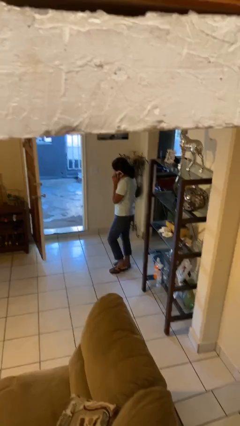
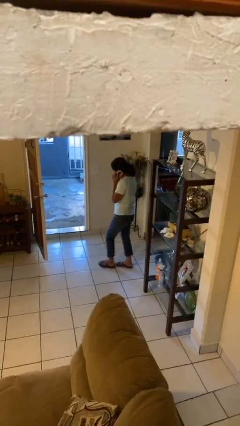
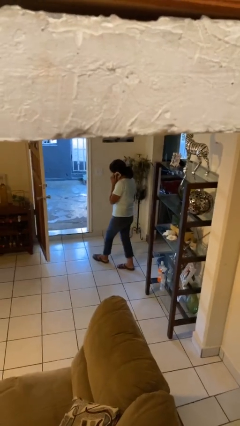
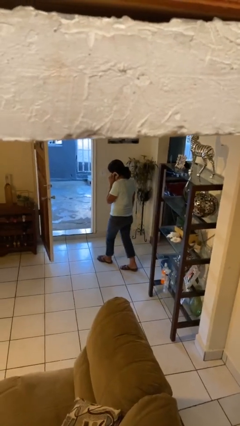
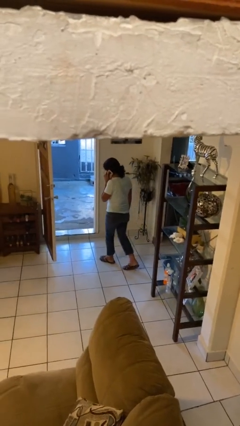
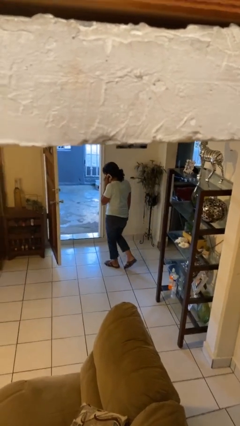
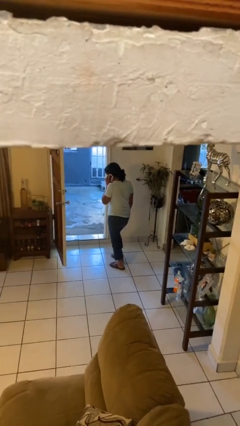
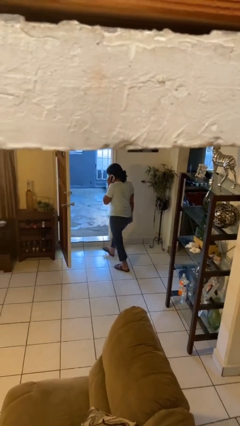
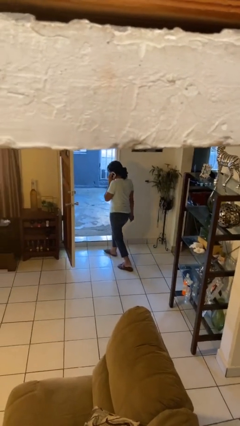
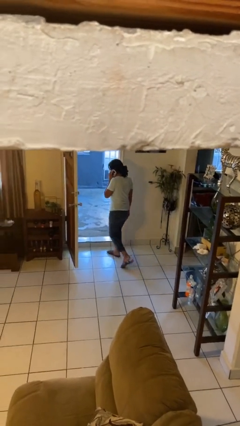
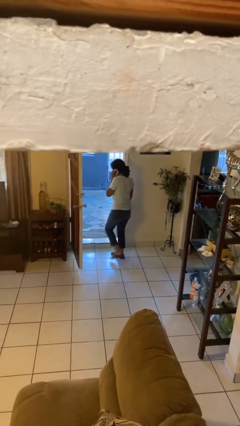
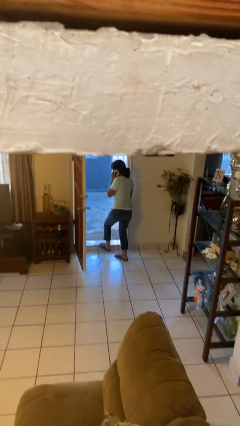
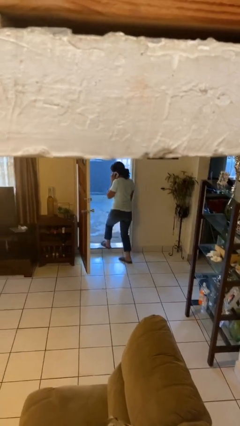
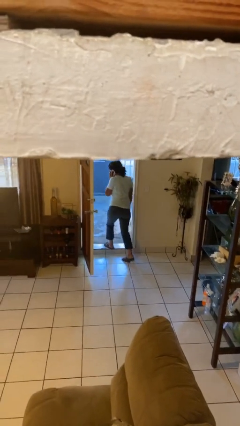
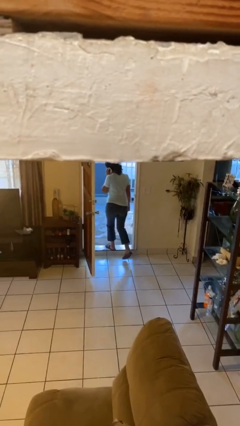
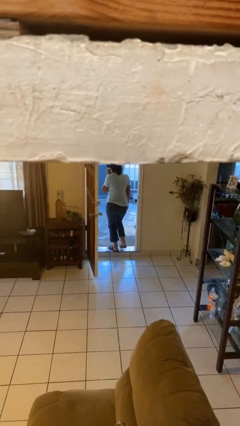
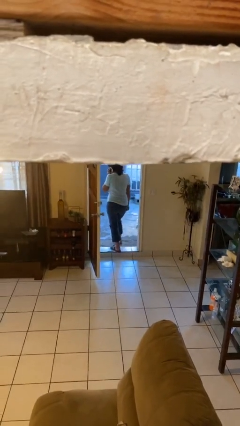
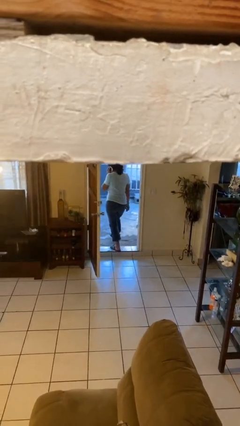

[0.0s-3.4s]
person exits scene through structure

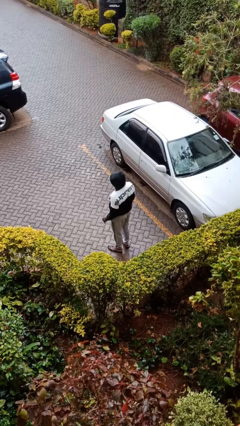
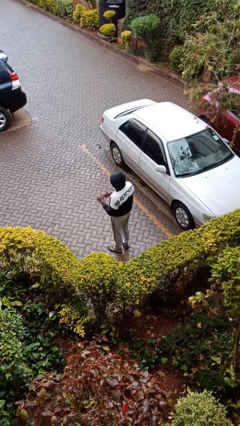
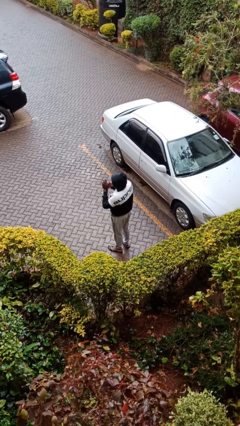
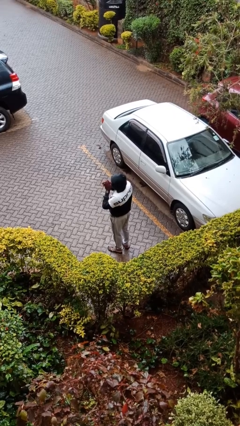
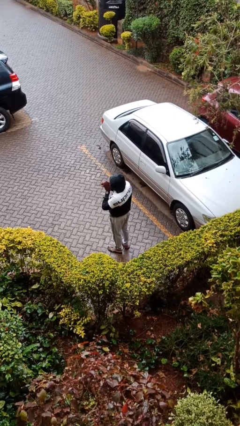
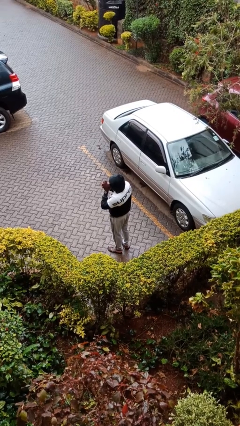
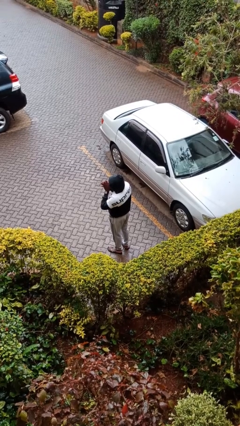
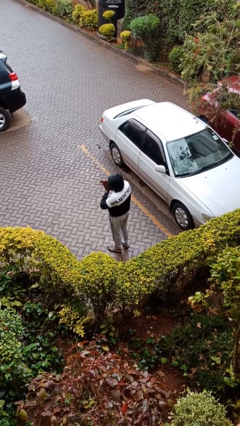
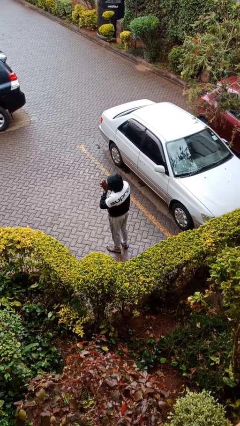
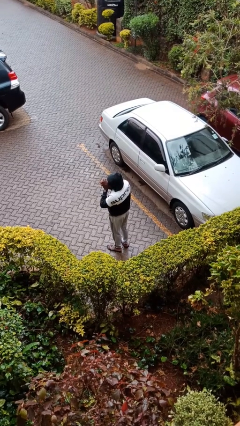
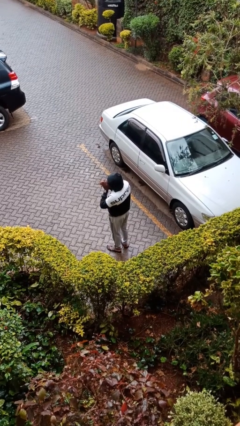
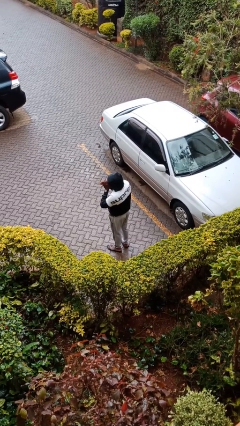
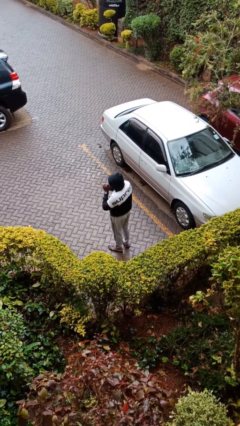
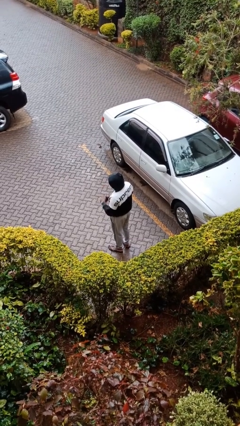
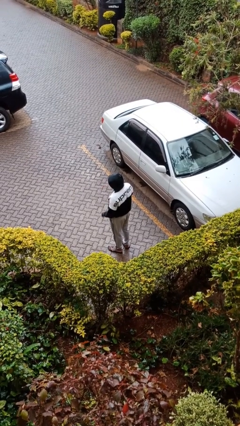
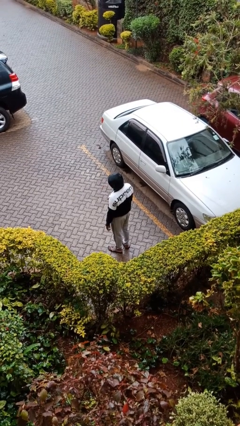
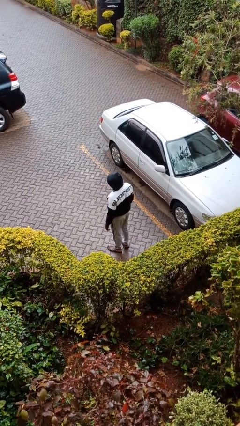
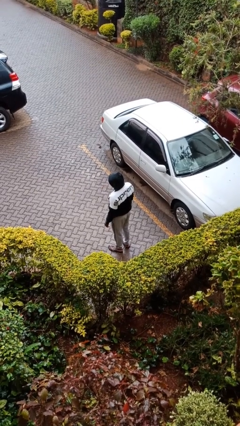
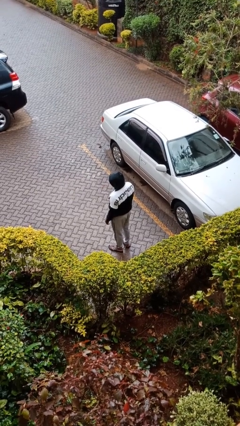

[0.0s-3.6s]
person blows into hands

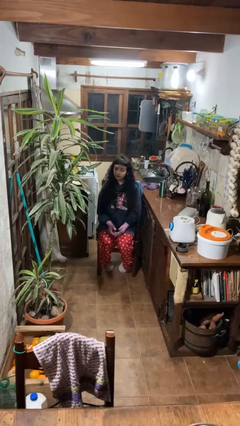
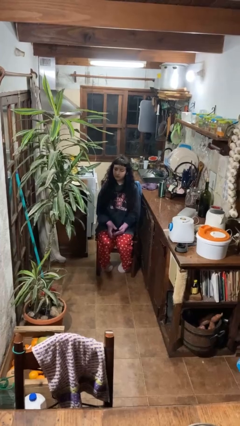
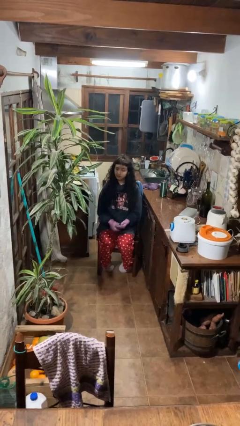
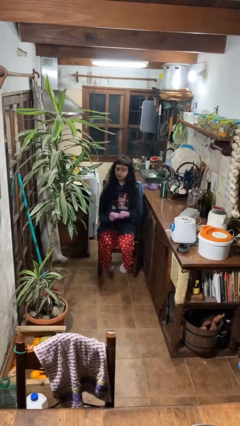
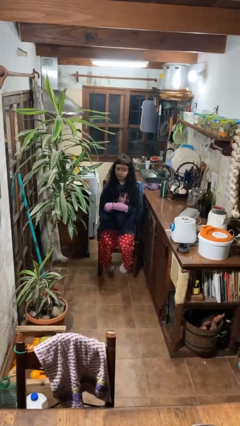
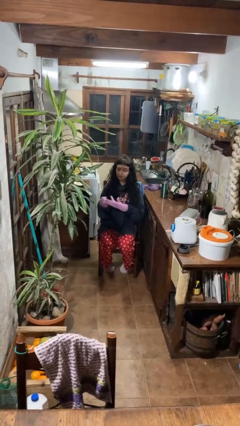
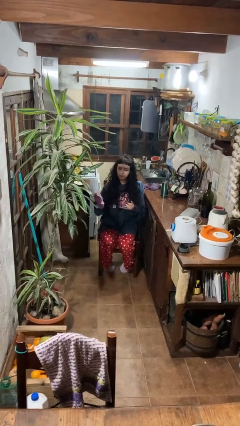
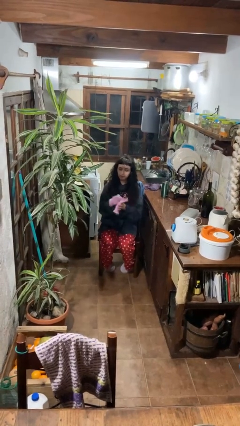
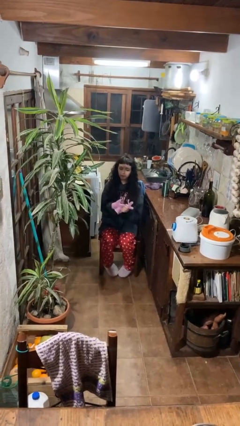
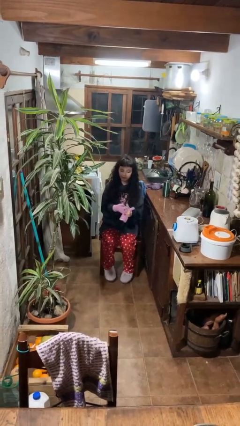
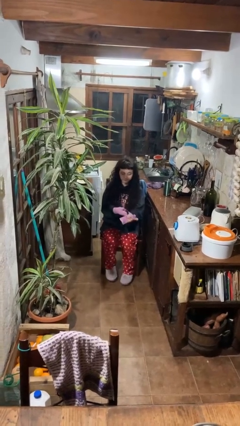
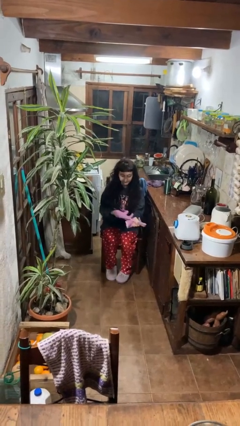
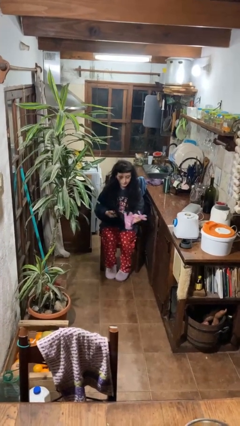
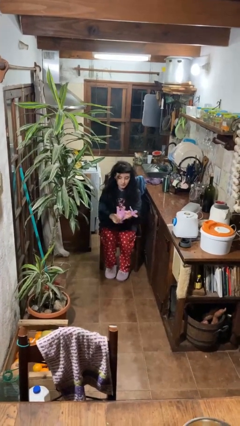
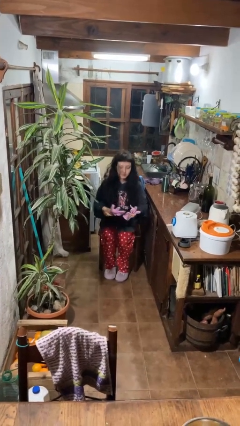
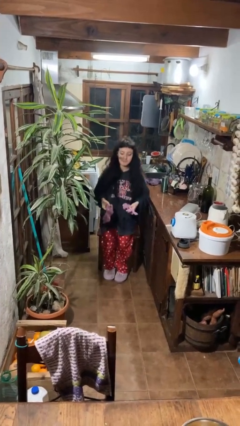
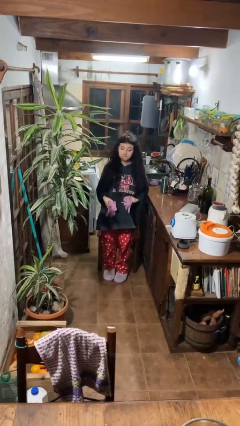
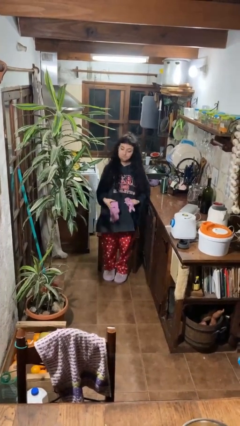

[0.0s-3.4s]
person takes off gloves

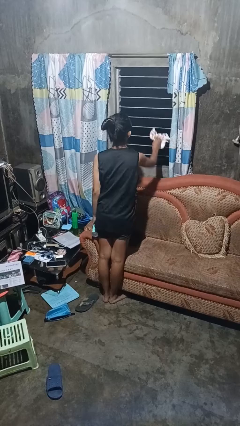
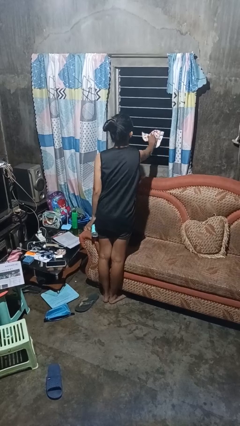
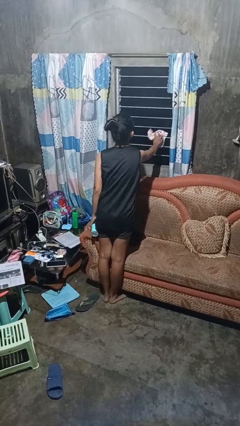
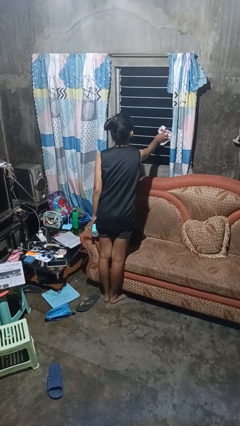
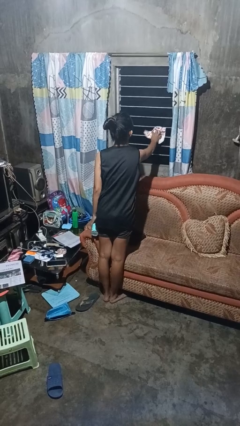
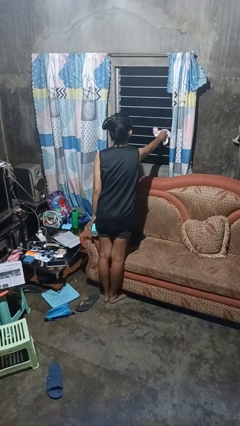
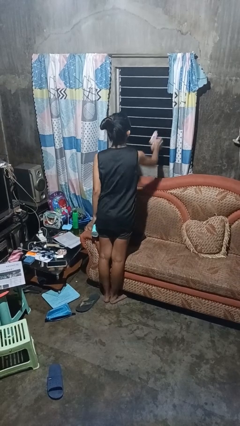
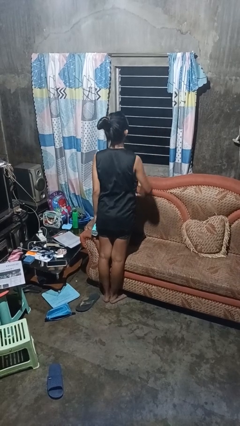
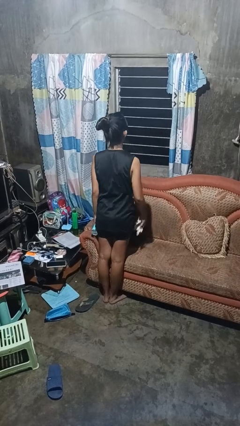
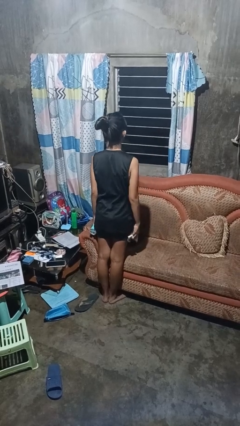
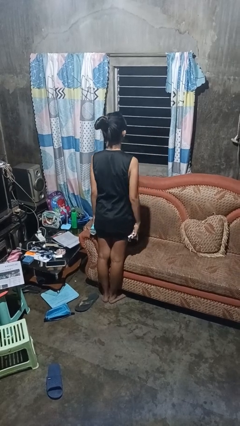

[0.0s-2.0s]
person washes window

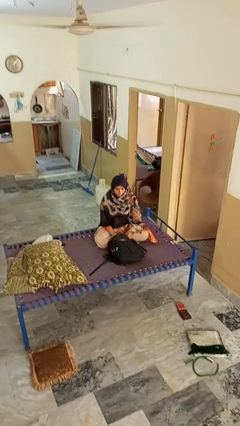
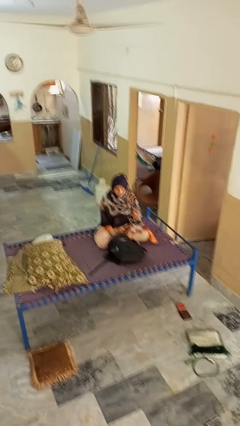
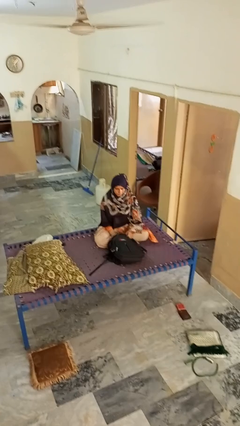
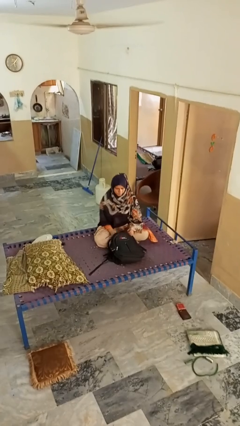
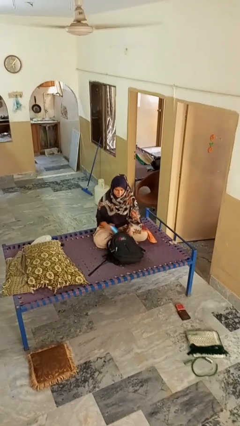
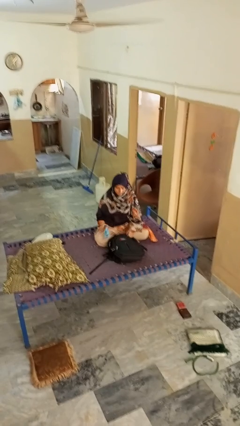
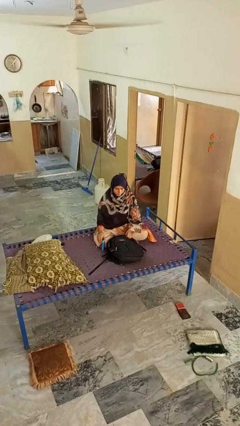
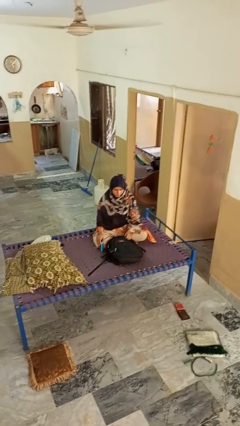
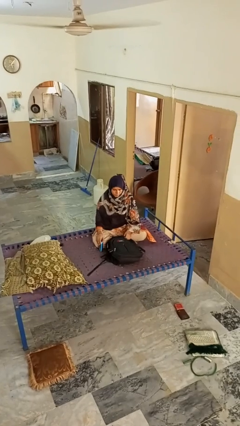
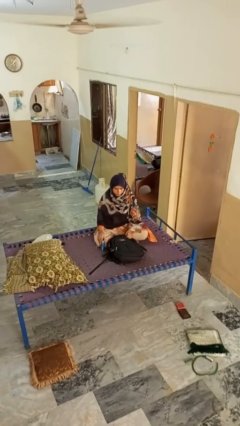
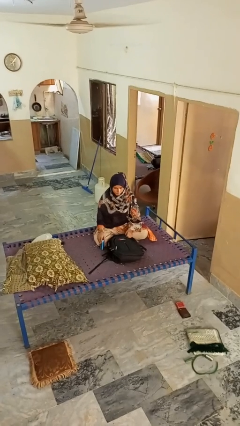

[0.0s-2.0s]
person takes object from bag

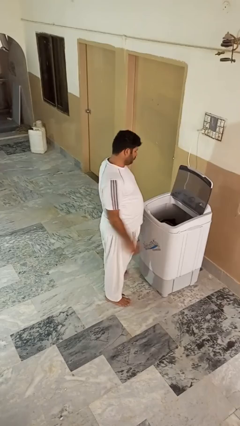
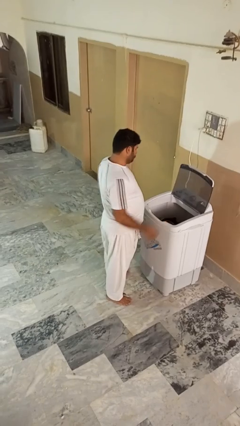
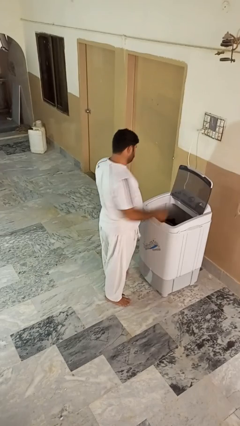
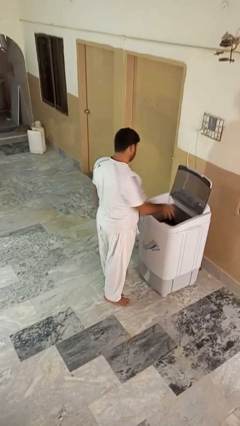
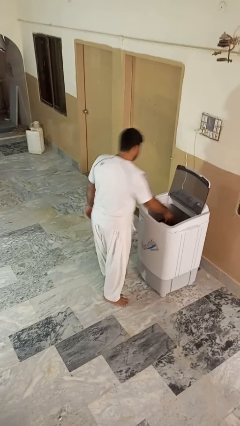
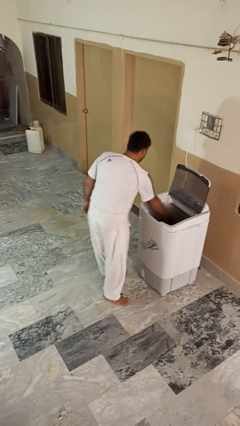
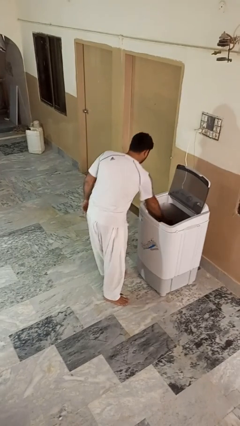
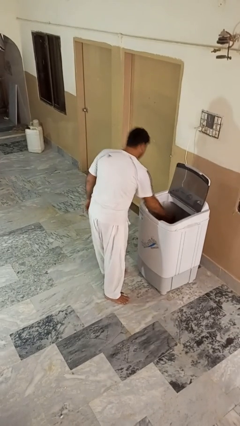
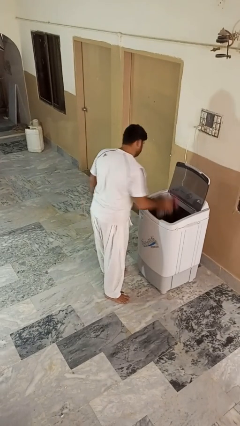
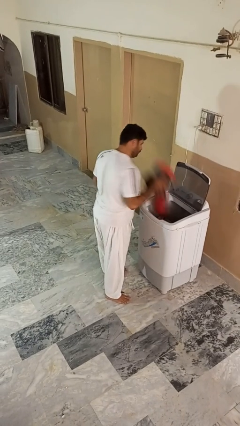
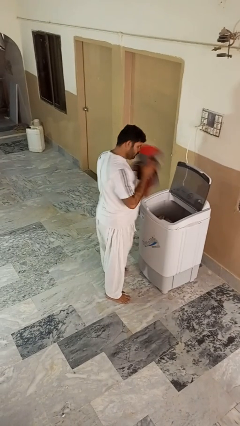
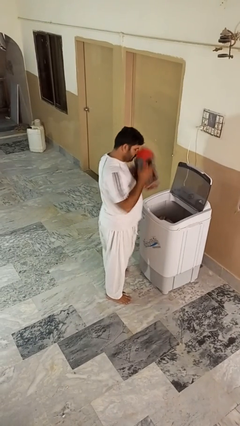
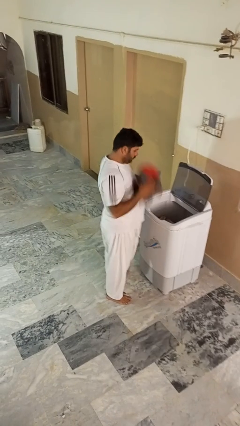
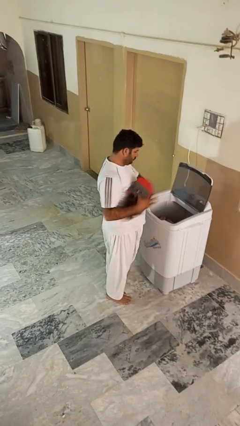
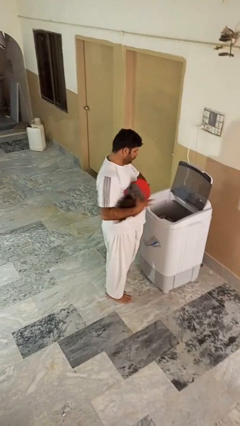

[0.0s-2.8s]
person unloads clotheswasher
